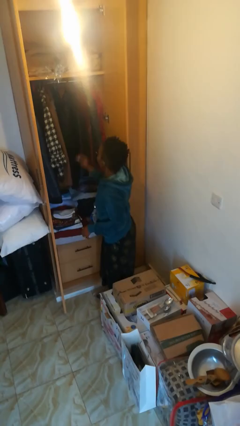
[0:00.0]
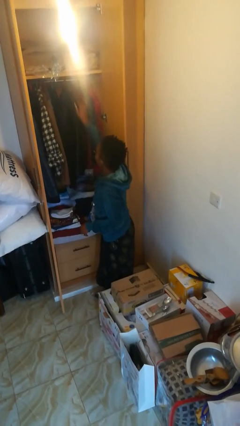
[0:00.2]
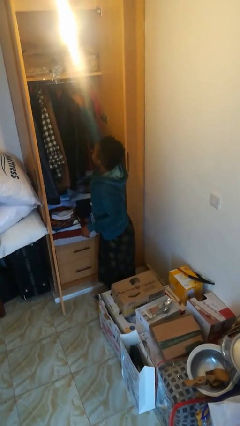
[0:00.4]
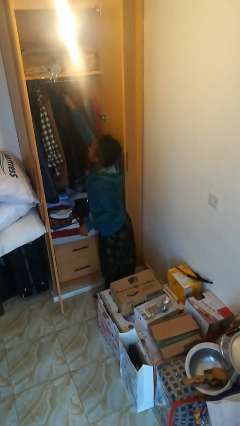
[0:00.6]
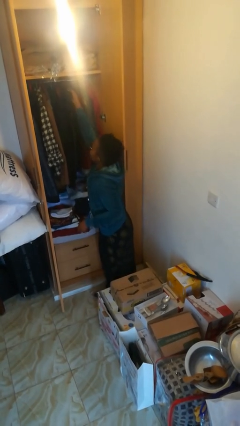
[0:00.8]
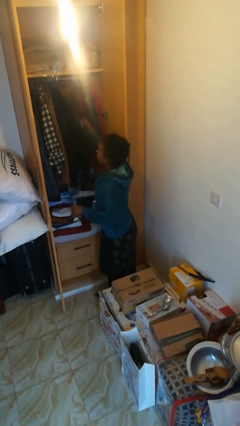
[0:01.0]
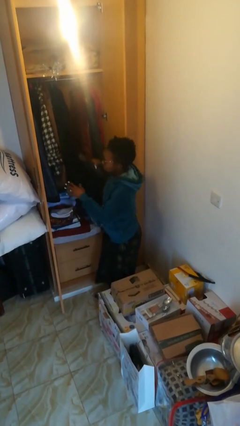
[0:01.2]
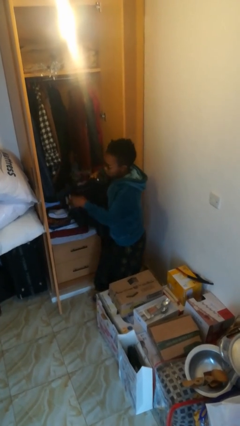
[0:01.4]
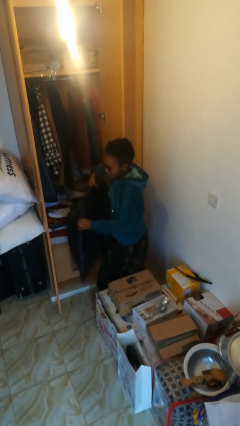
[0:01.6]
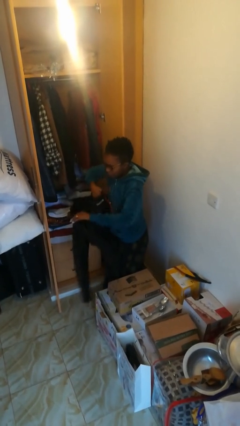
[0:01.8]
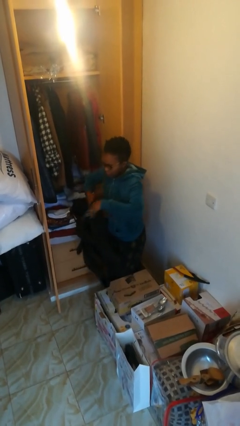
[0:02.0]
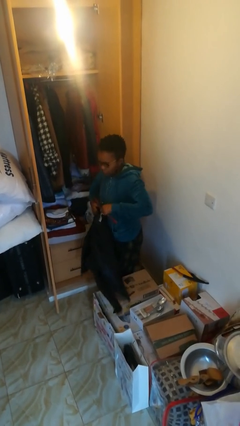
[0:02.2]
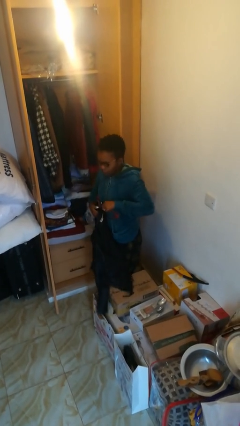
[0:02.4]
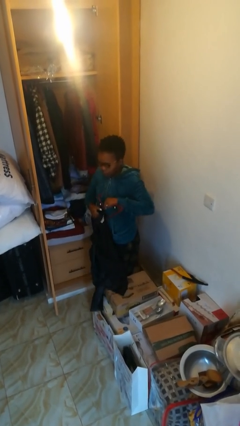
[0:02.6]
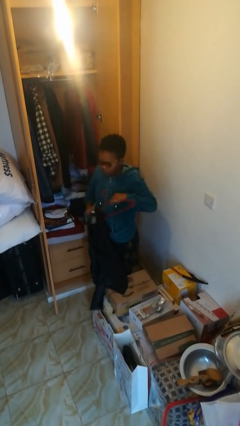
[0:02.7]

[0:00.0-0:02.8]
person takes clothes from closet

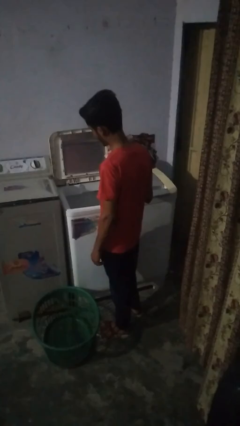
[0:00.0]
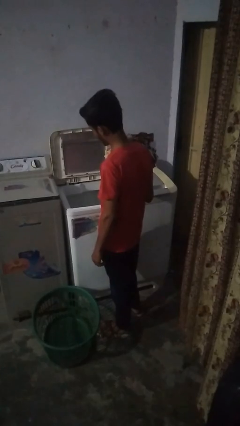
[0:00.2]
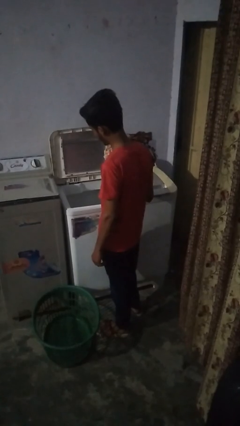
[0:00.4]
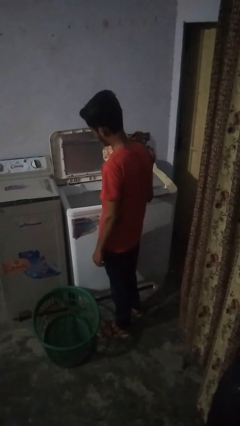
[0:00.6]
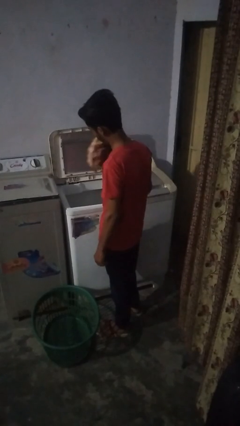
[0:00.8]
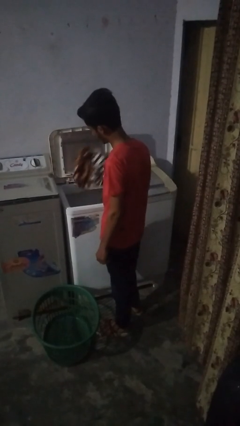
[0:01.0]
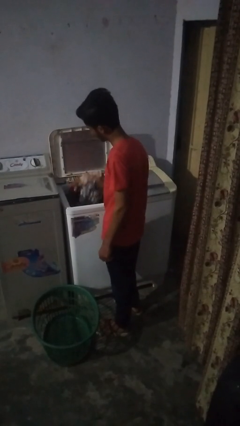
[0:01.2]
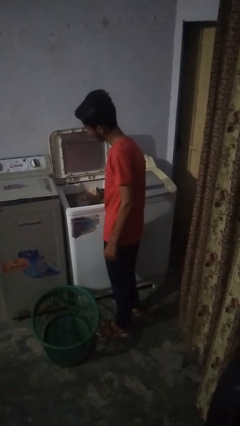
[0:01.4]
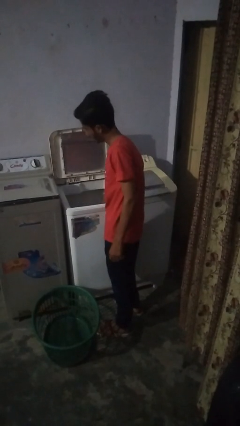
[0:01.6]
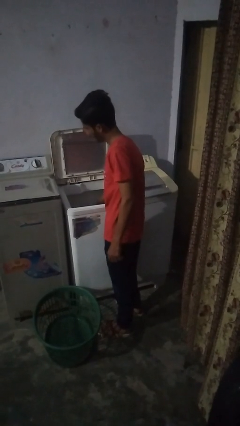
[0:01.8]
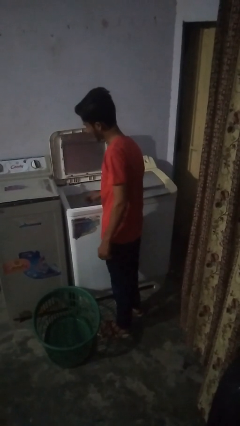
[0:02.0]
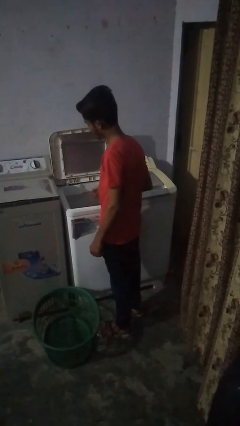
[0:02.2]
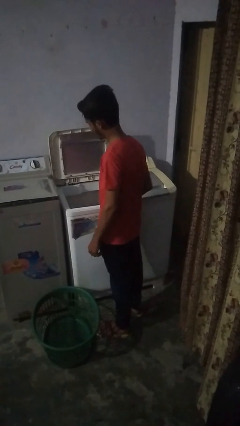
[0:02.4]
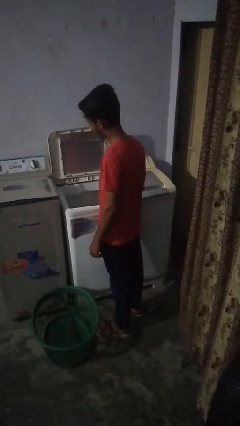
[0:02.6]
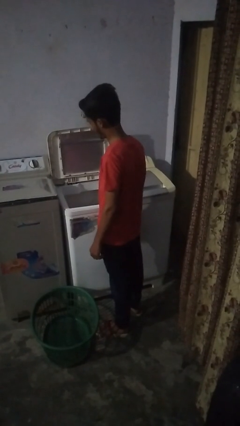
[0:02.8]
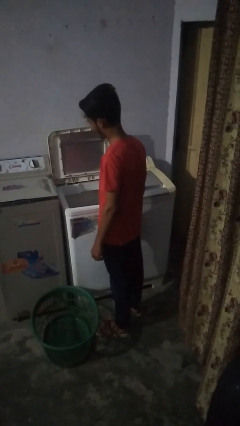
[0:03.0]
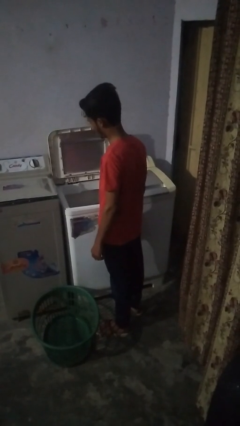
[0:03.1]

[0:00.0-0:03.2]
person loads clotheswasher

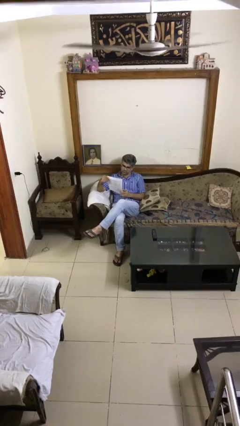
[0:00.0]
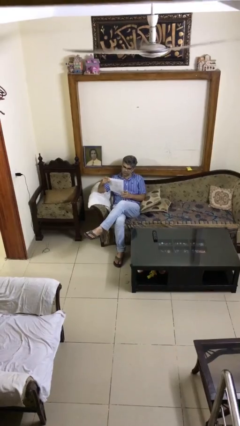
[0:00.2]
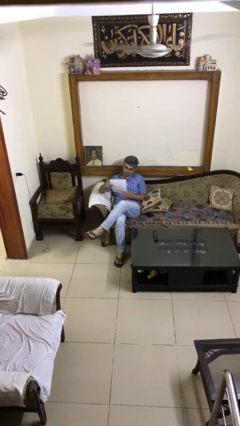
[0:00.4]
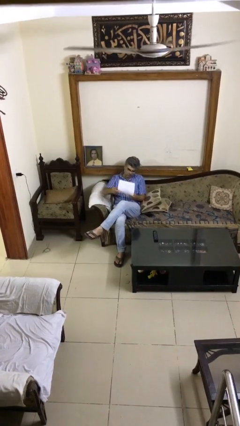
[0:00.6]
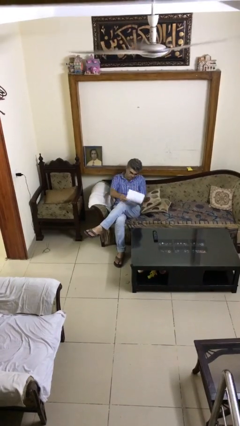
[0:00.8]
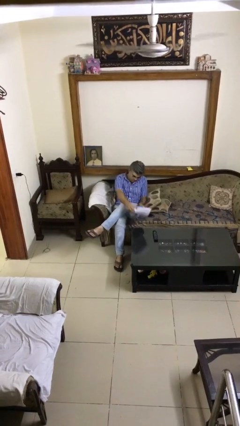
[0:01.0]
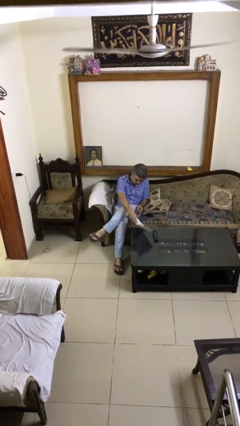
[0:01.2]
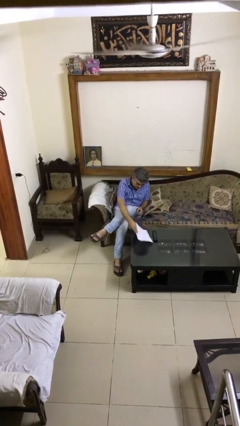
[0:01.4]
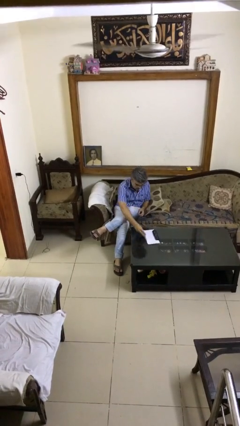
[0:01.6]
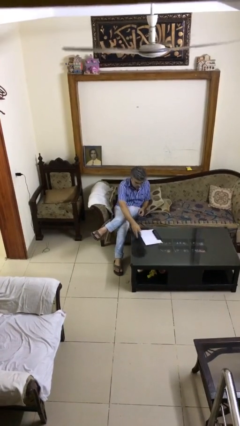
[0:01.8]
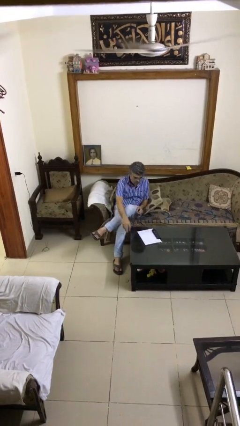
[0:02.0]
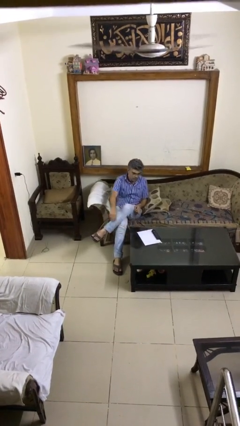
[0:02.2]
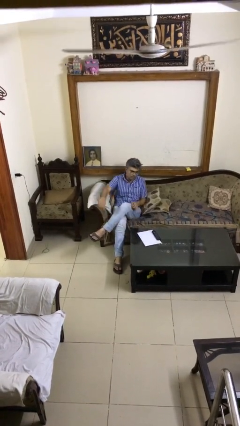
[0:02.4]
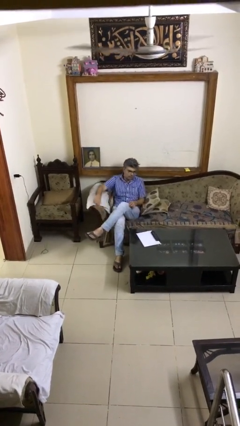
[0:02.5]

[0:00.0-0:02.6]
person puts down object on table

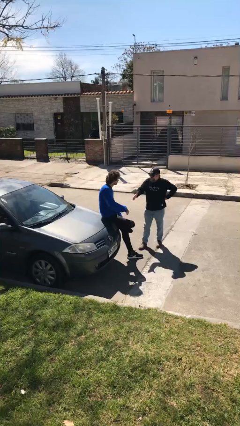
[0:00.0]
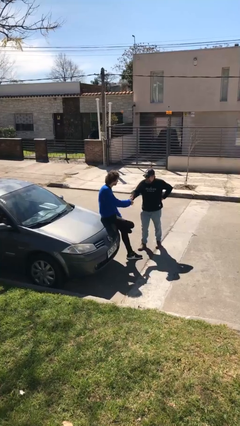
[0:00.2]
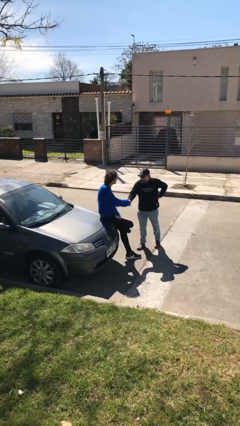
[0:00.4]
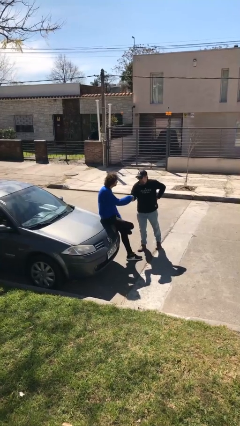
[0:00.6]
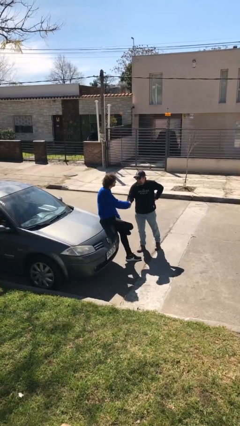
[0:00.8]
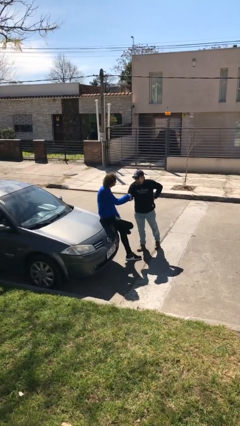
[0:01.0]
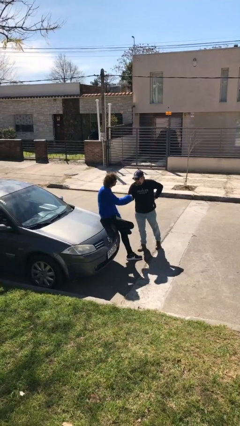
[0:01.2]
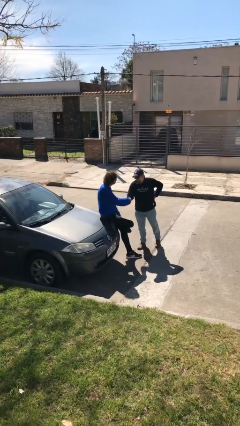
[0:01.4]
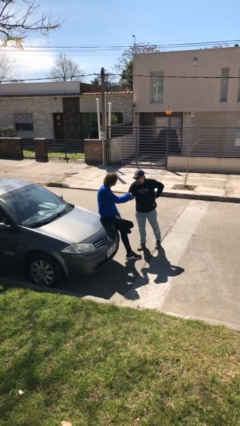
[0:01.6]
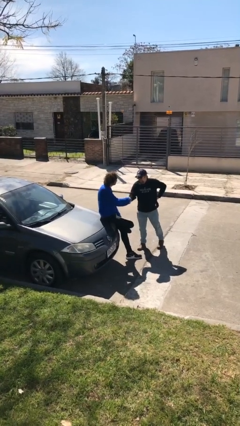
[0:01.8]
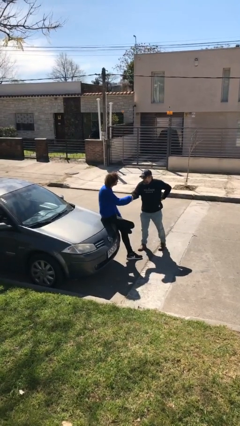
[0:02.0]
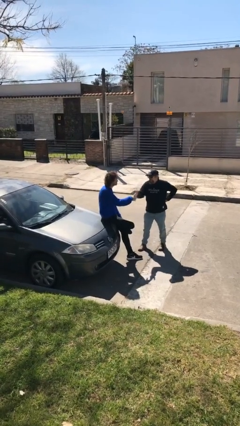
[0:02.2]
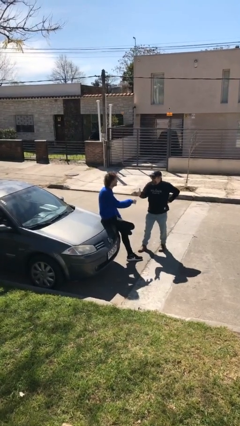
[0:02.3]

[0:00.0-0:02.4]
person shakes hand

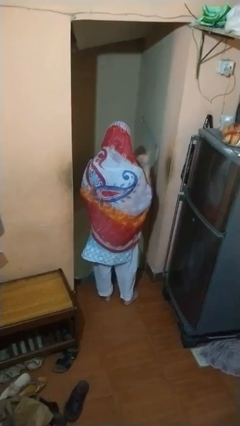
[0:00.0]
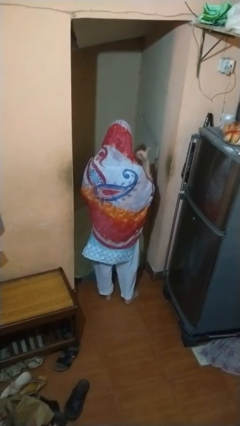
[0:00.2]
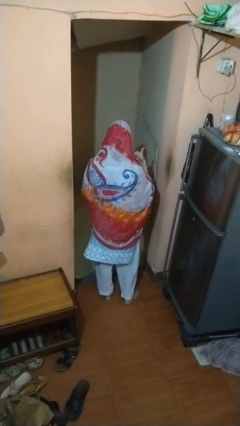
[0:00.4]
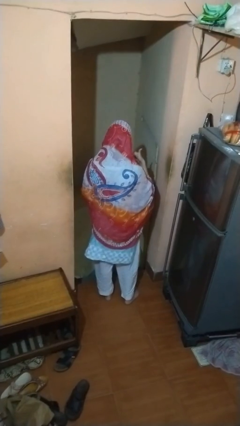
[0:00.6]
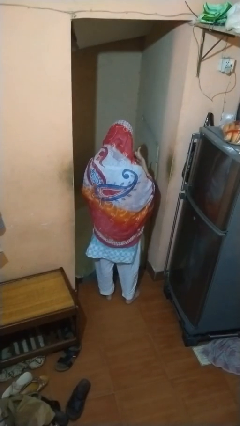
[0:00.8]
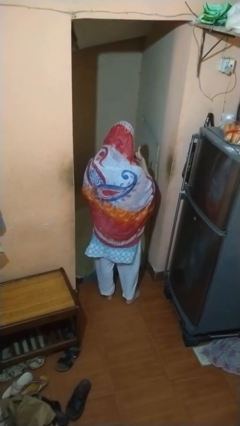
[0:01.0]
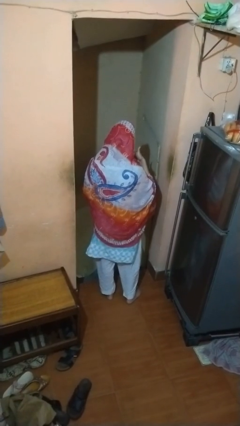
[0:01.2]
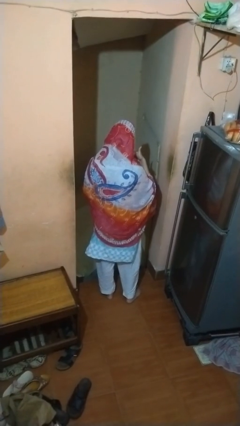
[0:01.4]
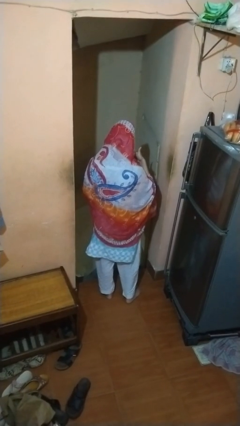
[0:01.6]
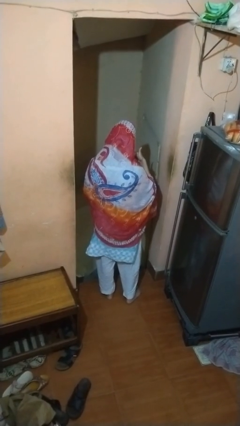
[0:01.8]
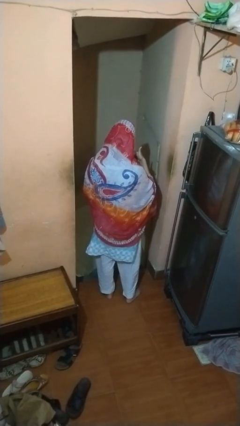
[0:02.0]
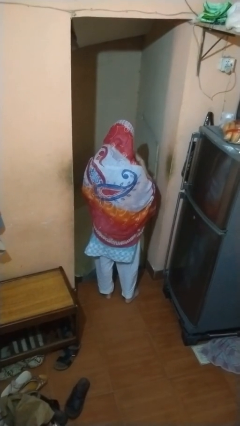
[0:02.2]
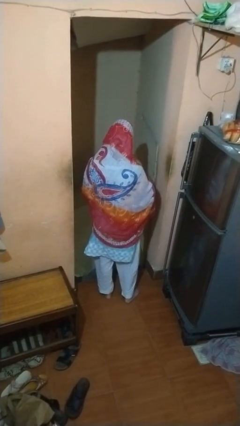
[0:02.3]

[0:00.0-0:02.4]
person gestures call me

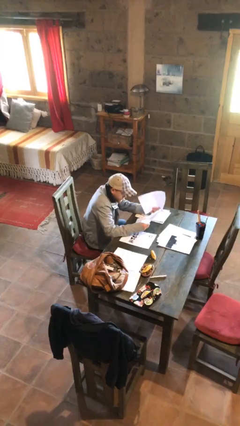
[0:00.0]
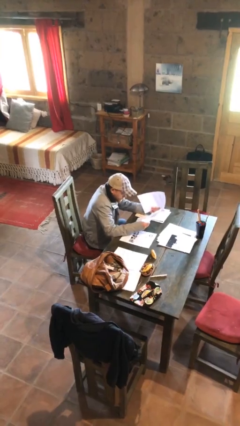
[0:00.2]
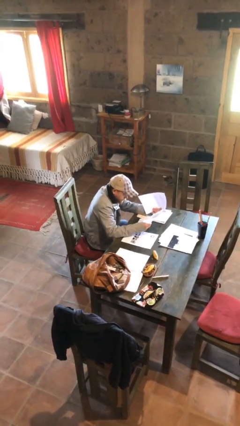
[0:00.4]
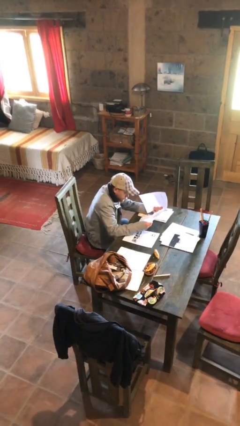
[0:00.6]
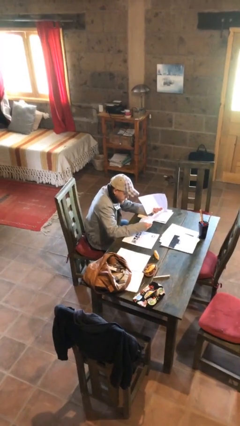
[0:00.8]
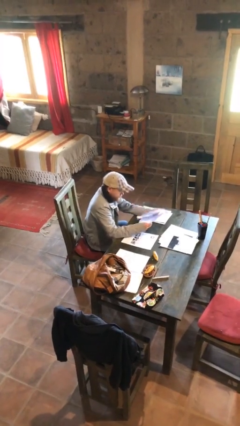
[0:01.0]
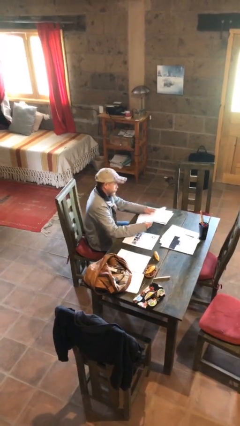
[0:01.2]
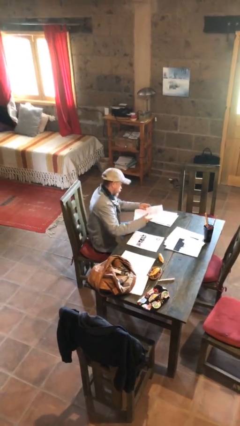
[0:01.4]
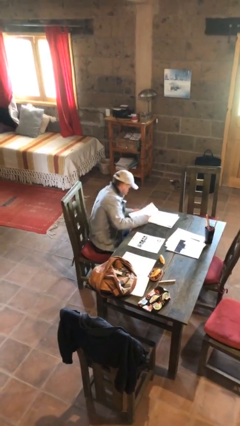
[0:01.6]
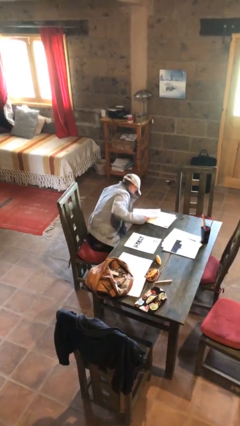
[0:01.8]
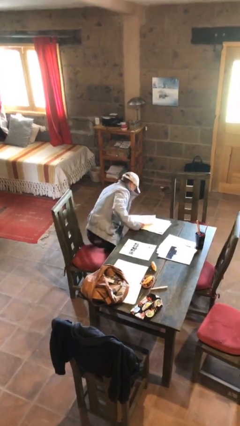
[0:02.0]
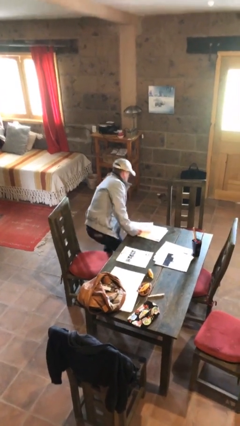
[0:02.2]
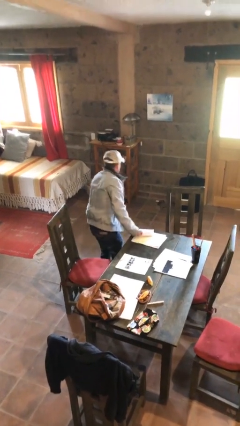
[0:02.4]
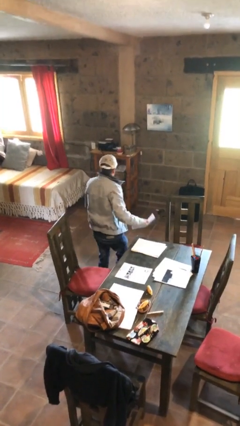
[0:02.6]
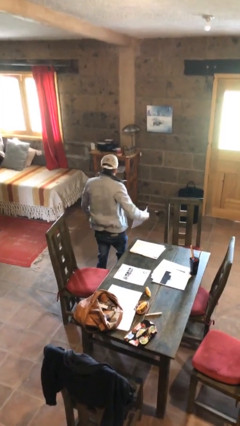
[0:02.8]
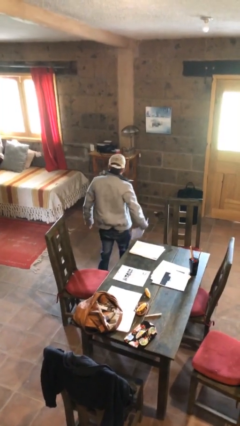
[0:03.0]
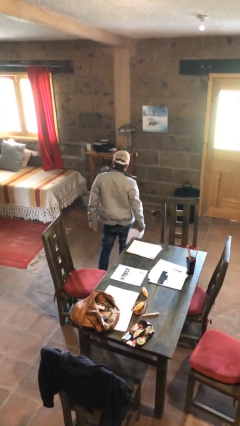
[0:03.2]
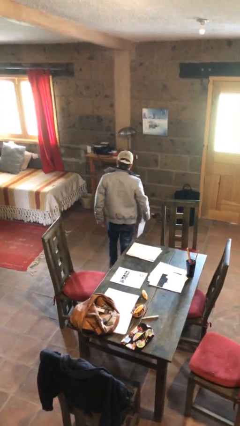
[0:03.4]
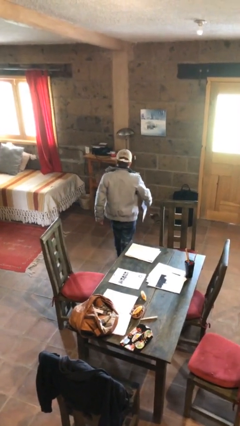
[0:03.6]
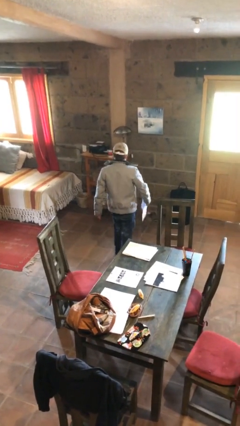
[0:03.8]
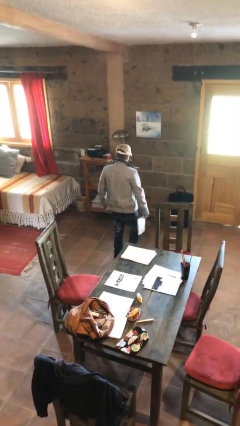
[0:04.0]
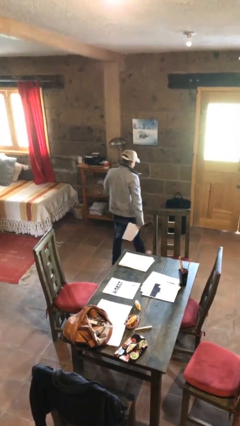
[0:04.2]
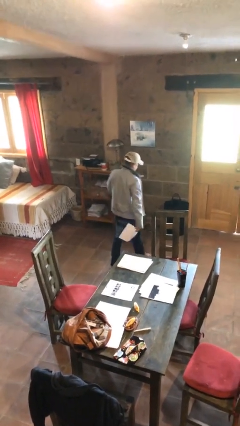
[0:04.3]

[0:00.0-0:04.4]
person stands up
